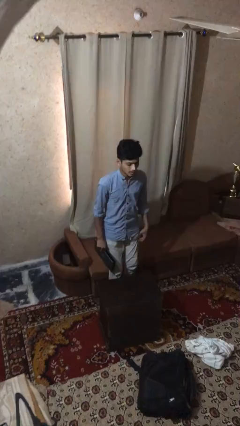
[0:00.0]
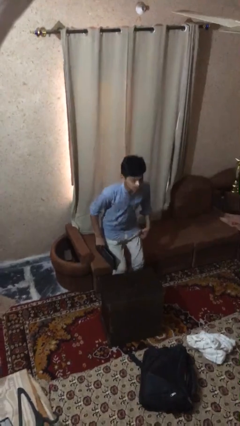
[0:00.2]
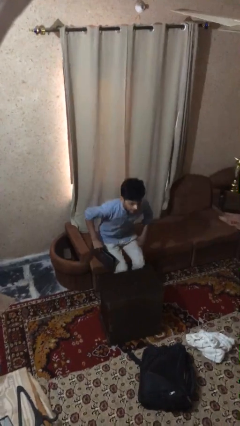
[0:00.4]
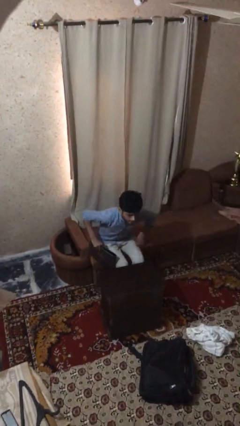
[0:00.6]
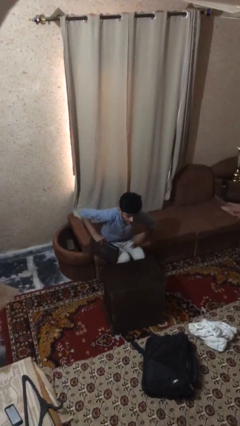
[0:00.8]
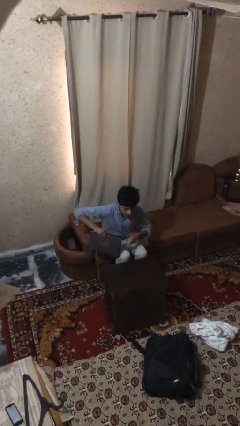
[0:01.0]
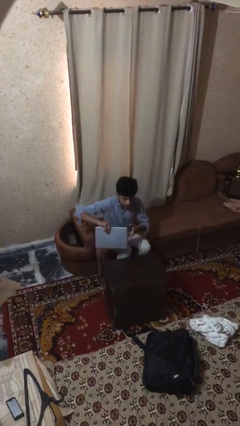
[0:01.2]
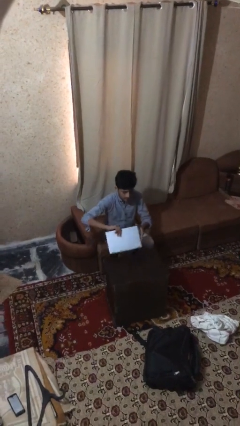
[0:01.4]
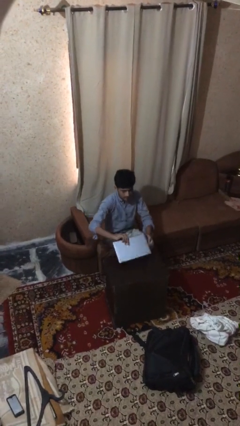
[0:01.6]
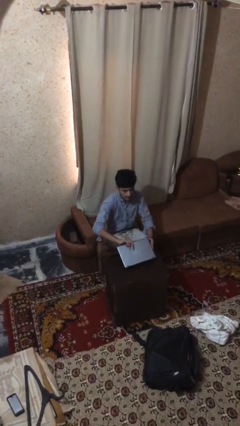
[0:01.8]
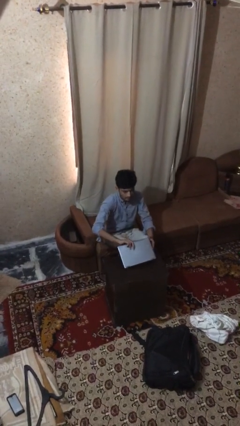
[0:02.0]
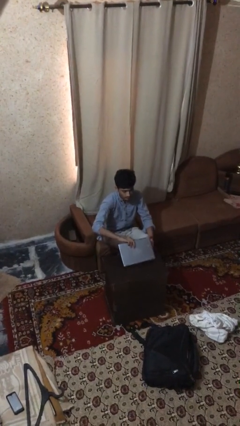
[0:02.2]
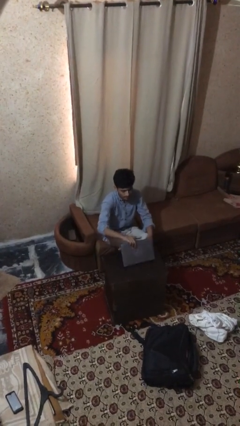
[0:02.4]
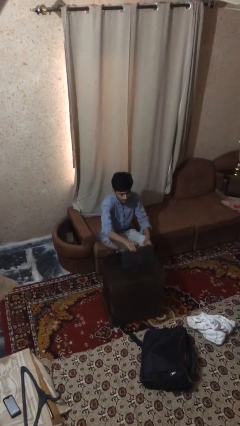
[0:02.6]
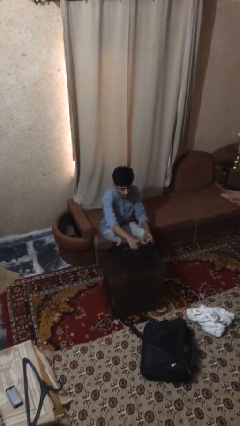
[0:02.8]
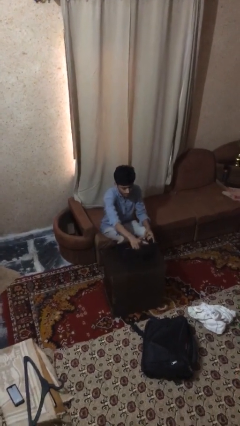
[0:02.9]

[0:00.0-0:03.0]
person sits down

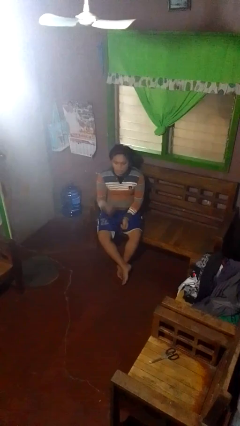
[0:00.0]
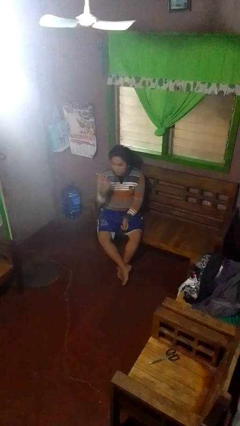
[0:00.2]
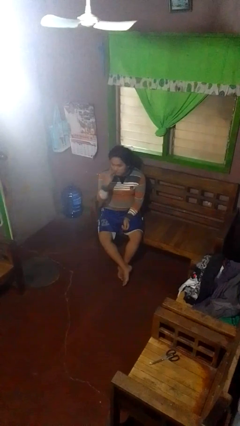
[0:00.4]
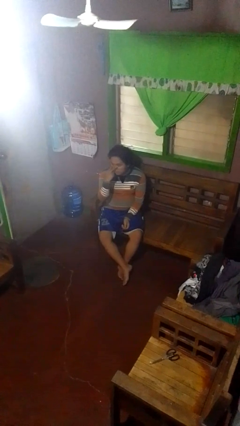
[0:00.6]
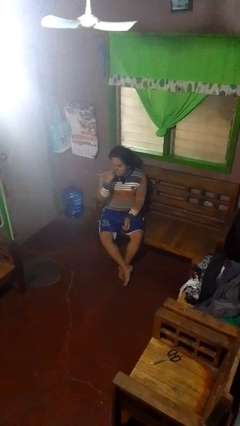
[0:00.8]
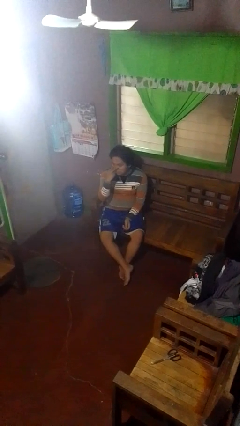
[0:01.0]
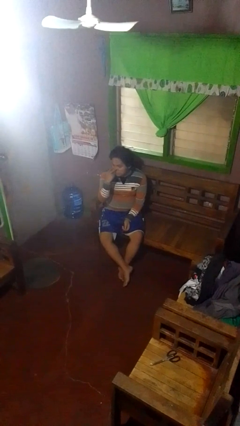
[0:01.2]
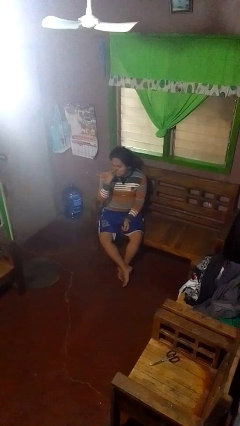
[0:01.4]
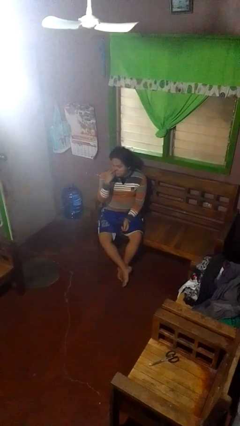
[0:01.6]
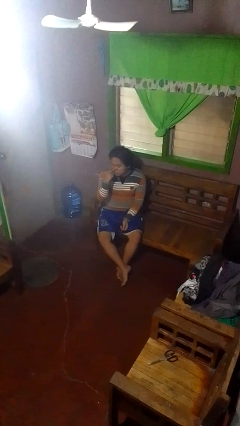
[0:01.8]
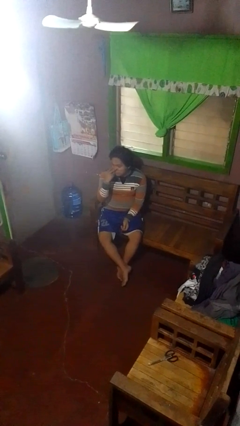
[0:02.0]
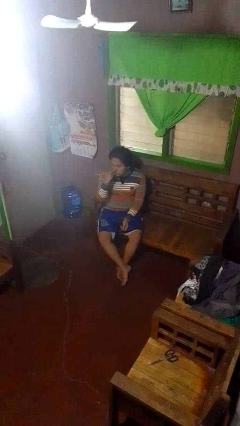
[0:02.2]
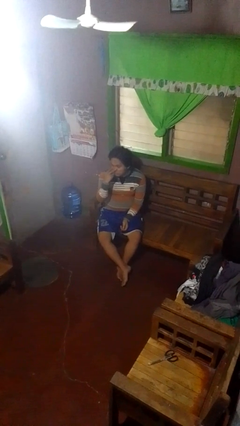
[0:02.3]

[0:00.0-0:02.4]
person gestures watch closely

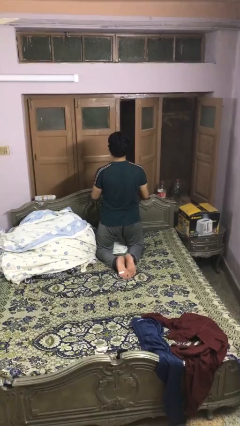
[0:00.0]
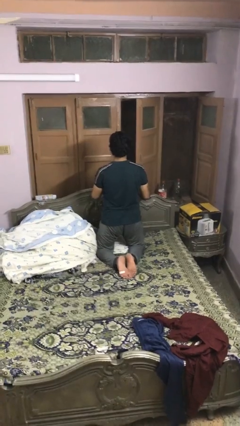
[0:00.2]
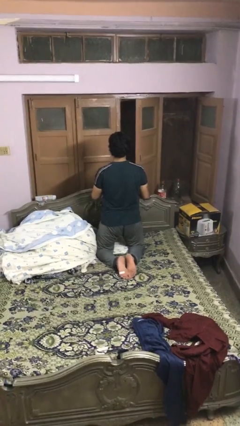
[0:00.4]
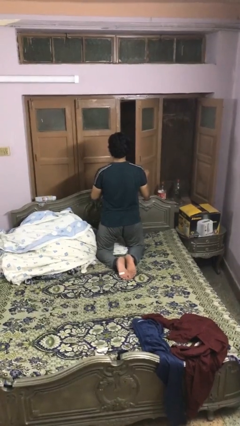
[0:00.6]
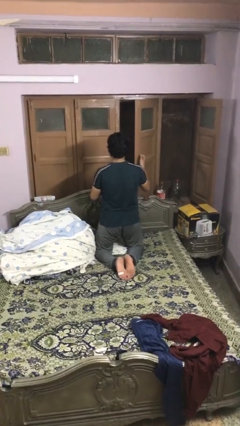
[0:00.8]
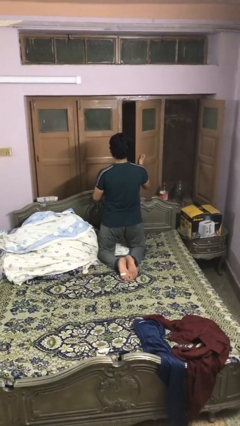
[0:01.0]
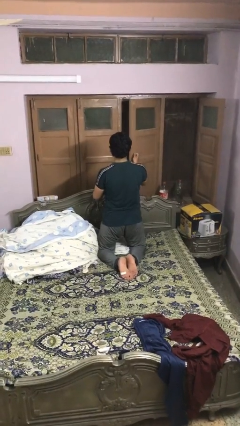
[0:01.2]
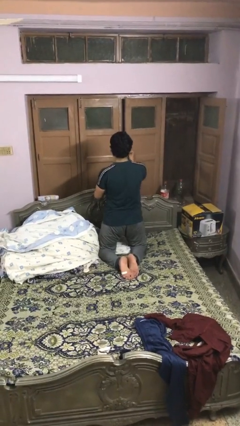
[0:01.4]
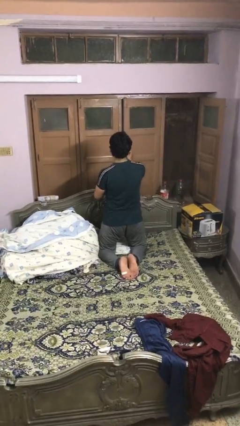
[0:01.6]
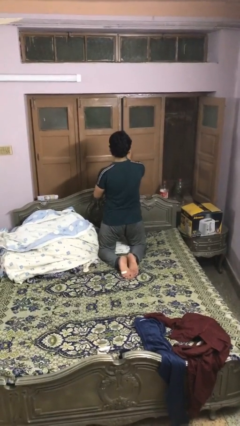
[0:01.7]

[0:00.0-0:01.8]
person closes home window

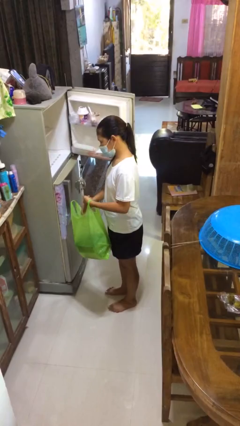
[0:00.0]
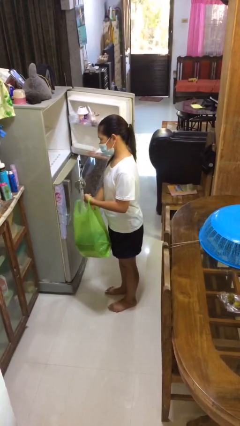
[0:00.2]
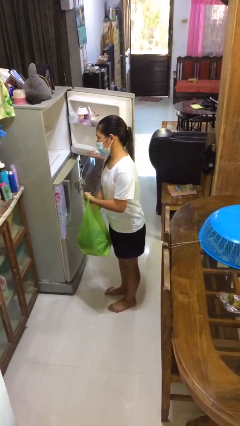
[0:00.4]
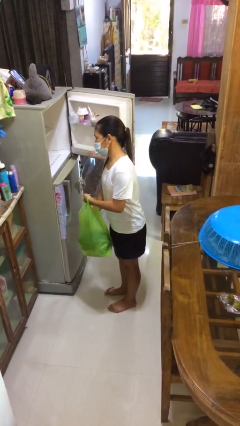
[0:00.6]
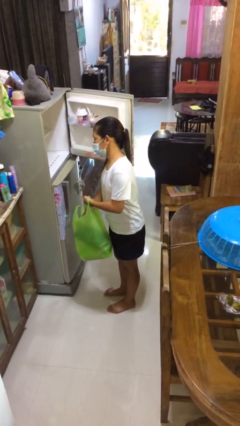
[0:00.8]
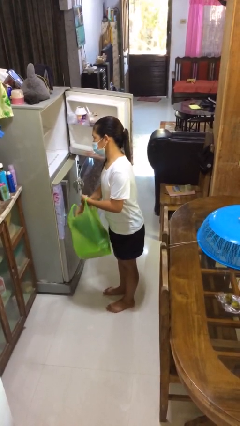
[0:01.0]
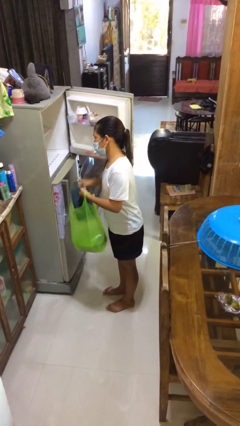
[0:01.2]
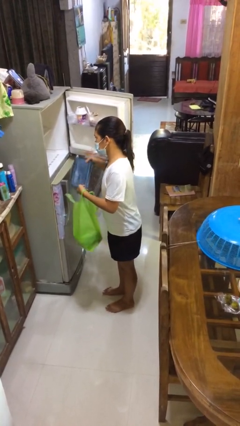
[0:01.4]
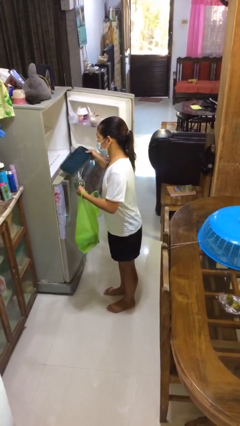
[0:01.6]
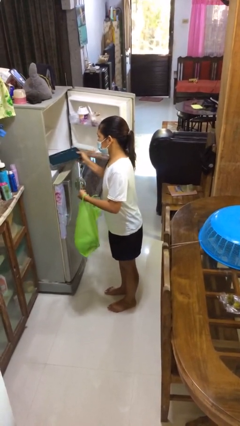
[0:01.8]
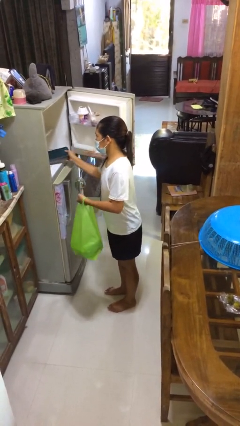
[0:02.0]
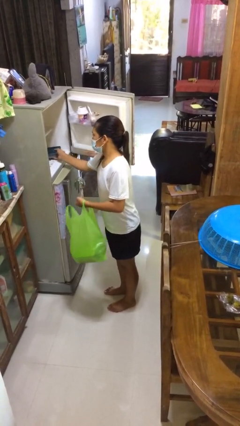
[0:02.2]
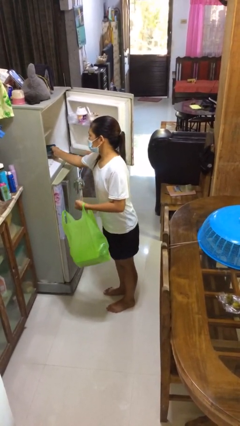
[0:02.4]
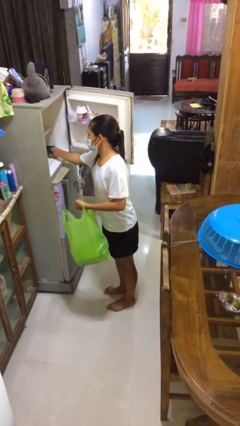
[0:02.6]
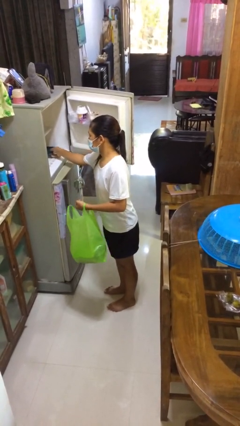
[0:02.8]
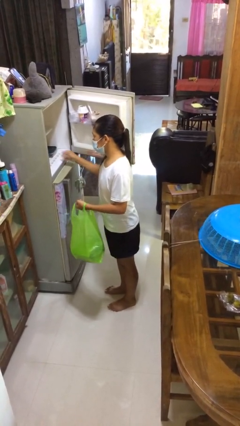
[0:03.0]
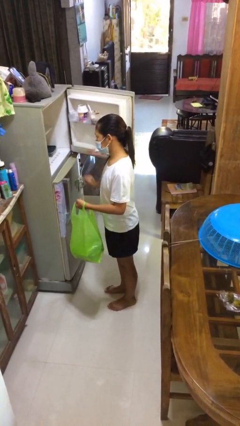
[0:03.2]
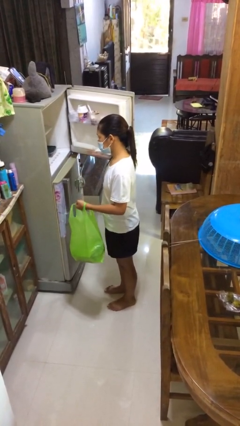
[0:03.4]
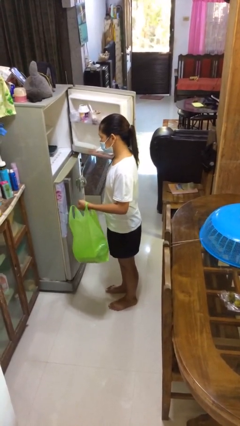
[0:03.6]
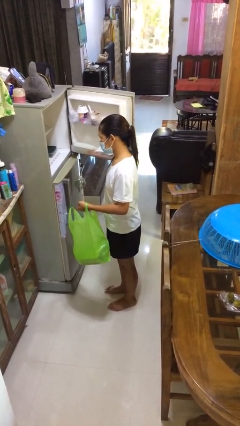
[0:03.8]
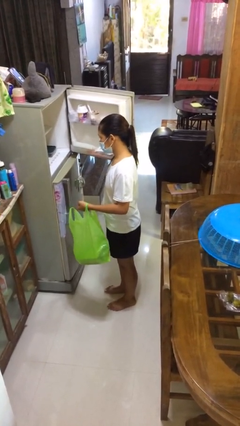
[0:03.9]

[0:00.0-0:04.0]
person loads groceries into refrigerator

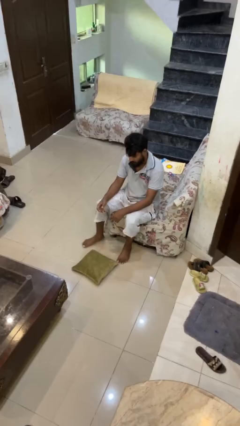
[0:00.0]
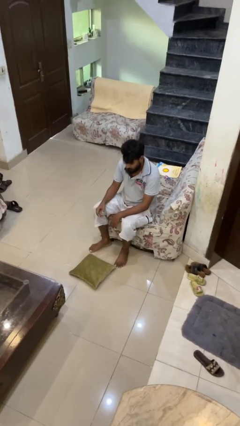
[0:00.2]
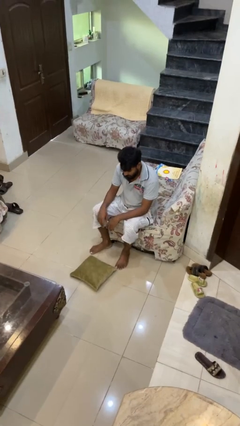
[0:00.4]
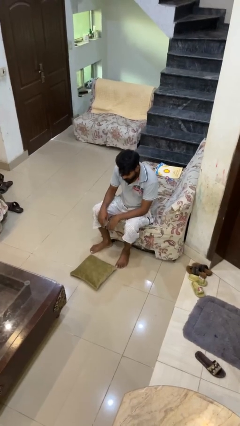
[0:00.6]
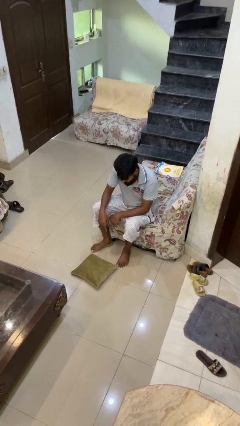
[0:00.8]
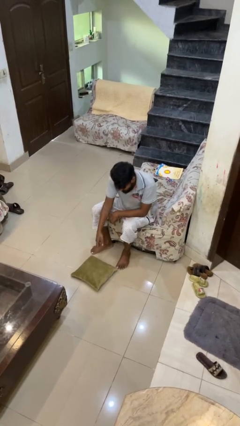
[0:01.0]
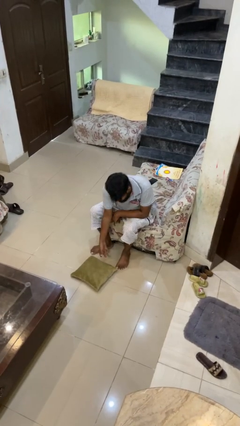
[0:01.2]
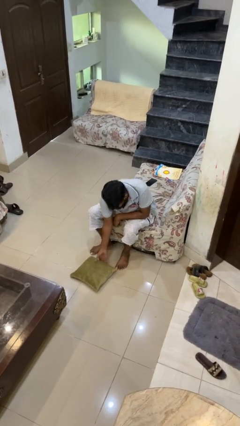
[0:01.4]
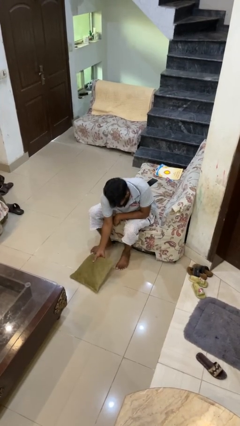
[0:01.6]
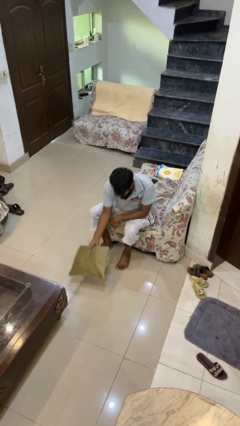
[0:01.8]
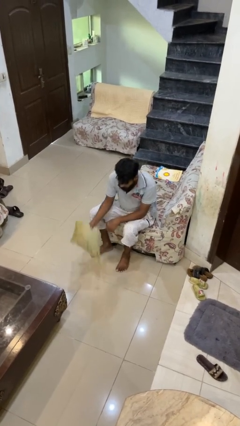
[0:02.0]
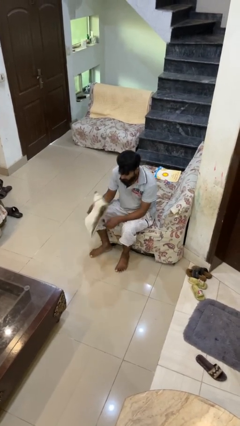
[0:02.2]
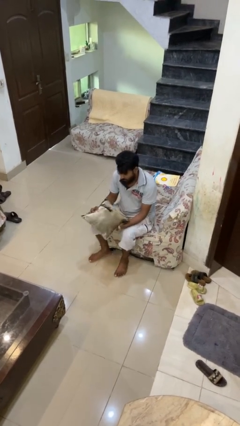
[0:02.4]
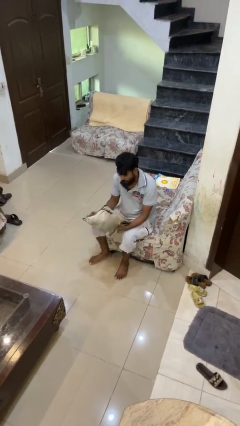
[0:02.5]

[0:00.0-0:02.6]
person picks up object from floor

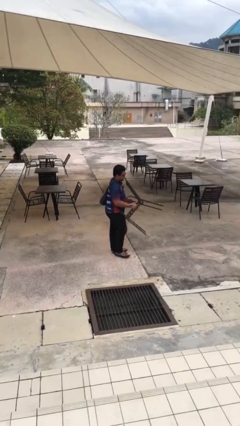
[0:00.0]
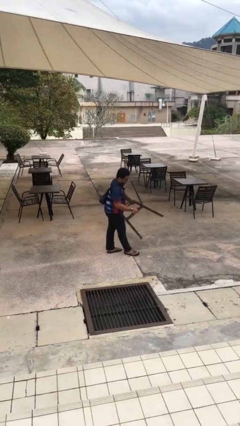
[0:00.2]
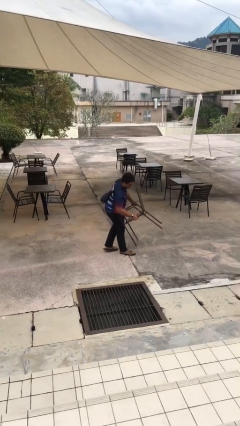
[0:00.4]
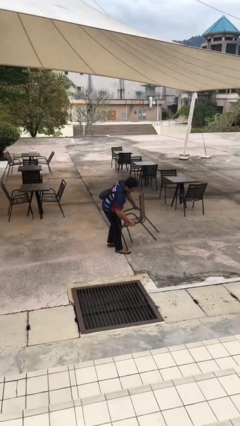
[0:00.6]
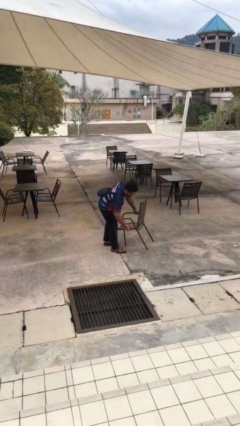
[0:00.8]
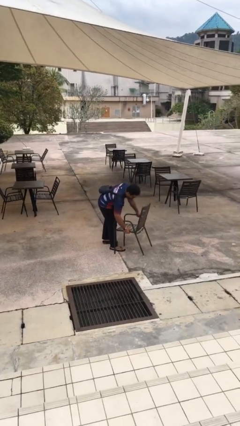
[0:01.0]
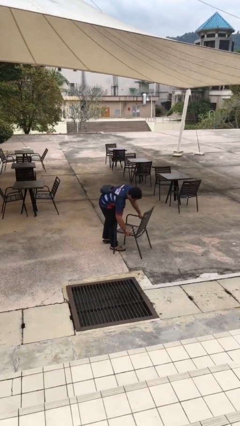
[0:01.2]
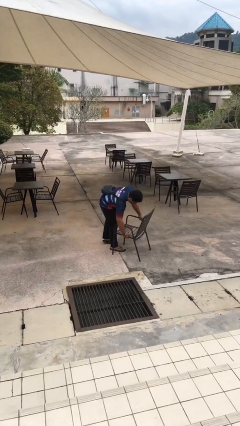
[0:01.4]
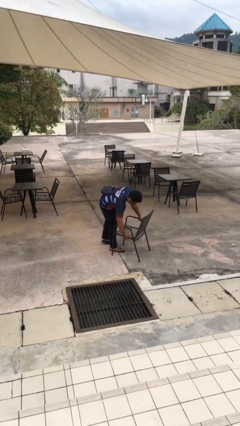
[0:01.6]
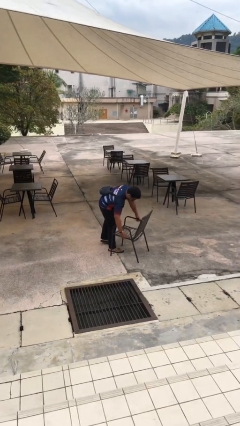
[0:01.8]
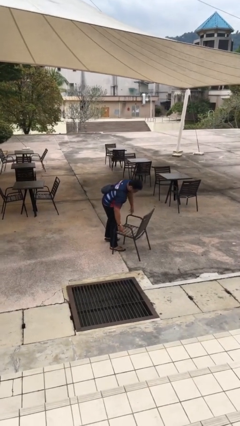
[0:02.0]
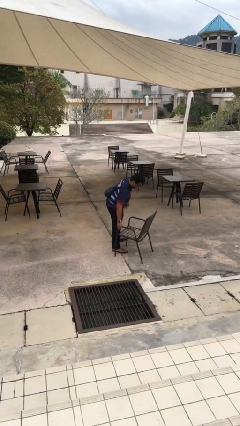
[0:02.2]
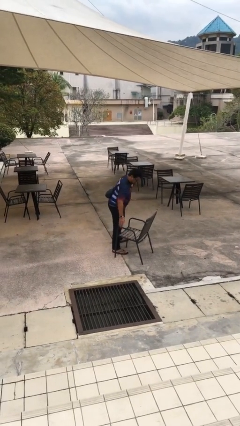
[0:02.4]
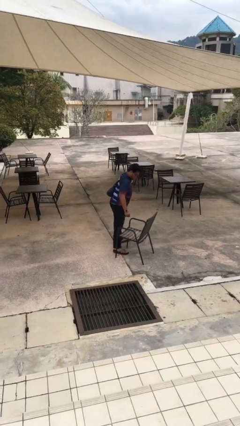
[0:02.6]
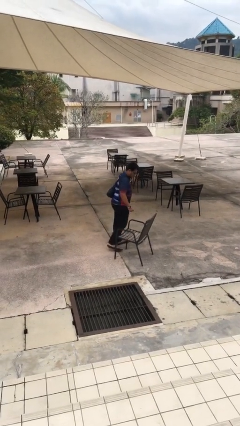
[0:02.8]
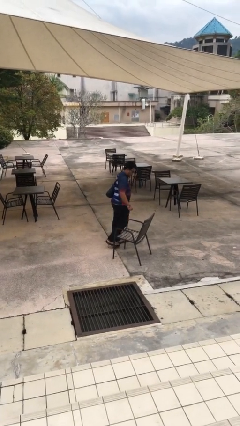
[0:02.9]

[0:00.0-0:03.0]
person puts down object on floor

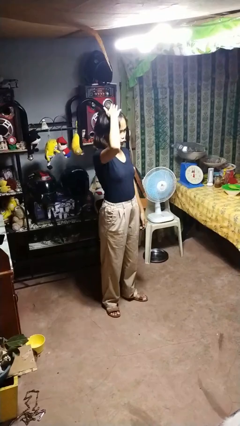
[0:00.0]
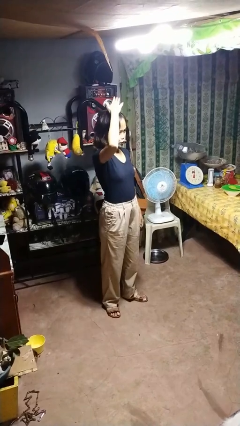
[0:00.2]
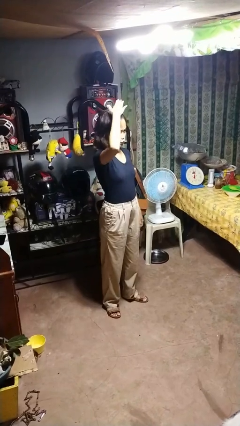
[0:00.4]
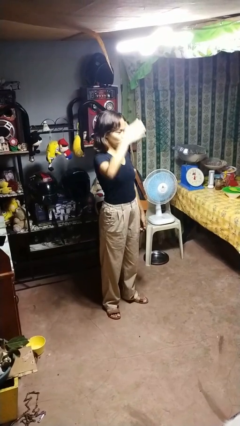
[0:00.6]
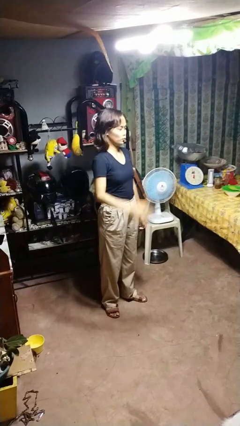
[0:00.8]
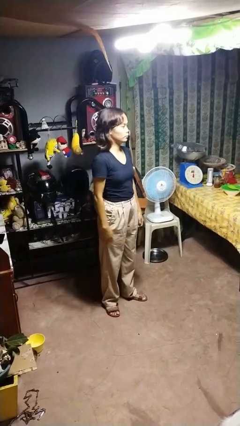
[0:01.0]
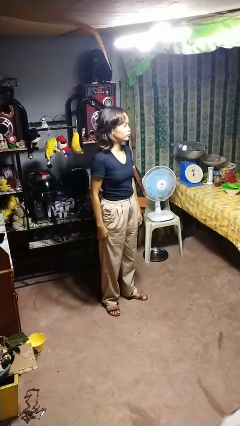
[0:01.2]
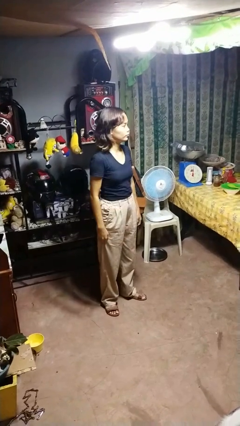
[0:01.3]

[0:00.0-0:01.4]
person pats head
